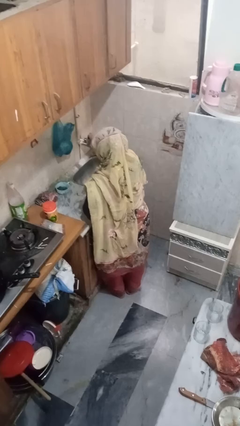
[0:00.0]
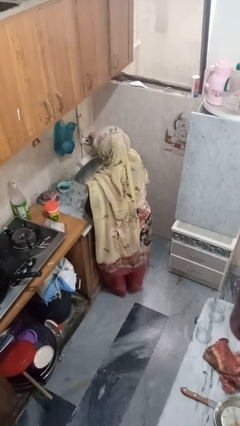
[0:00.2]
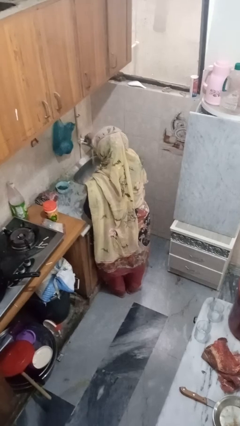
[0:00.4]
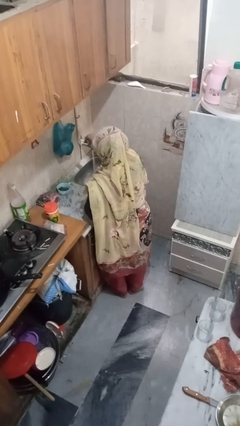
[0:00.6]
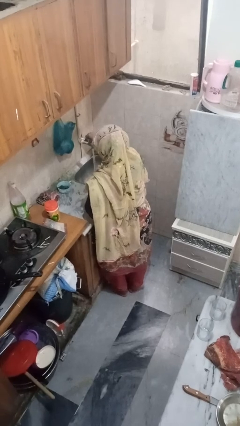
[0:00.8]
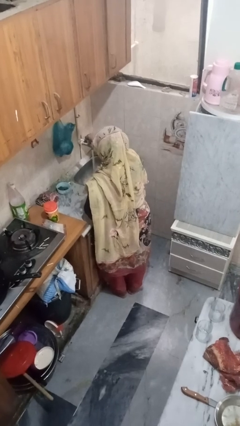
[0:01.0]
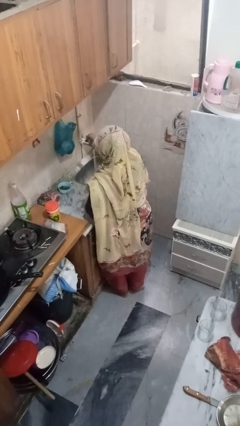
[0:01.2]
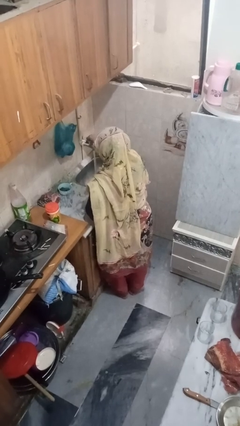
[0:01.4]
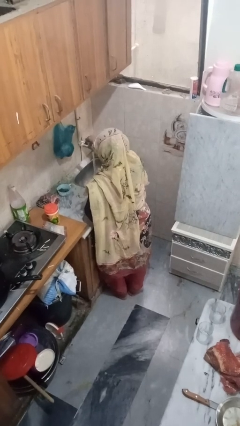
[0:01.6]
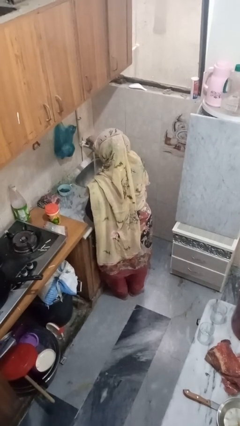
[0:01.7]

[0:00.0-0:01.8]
person turns on faucet

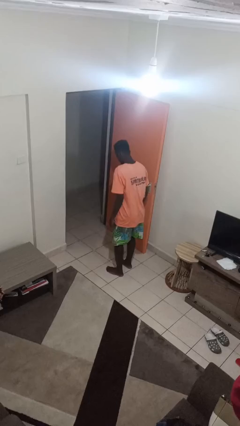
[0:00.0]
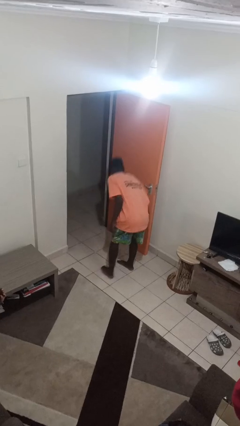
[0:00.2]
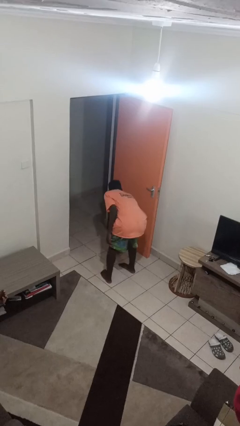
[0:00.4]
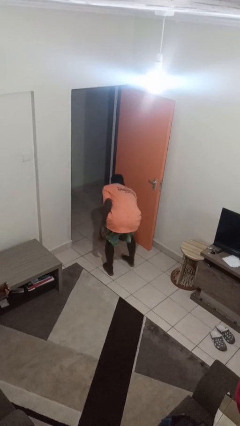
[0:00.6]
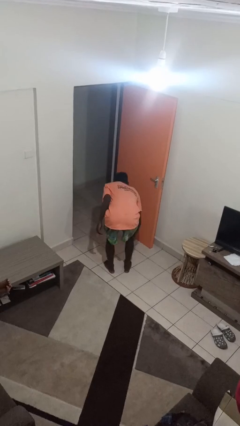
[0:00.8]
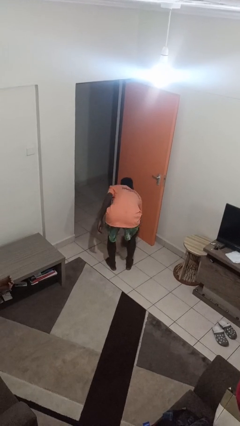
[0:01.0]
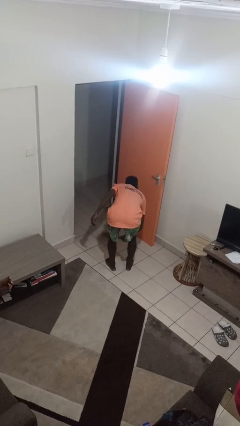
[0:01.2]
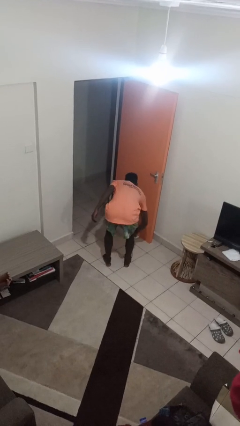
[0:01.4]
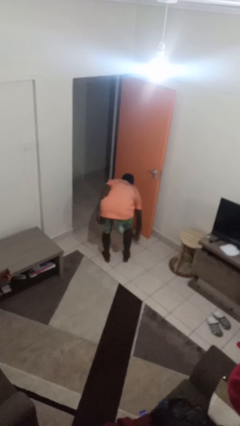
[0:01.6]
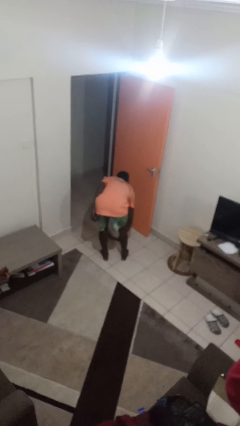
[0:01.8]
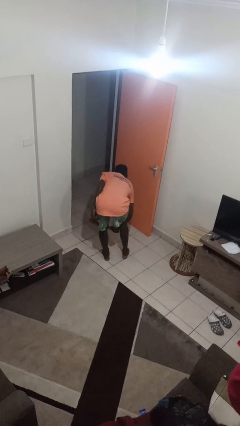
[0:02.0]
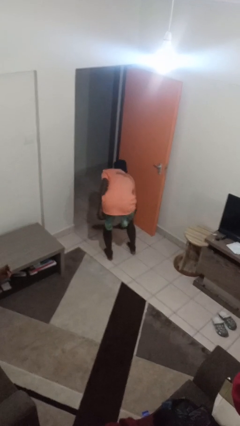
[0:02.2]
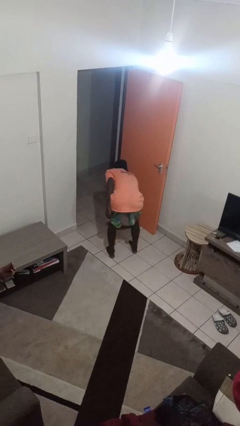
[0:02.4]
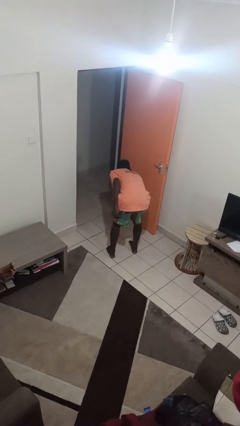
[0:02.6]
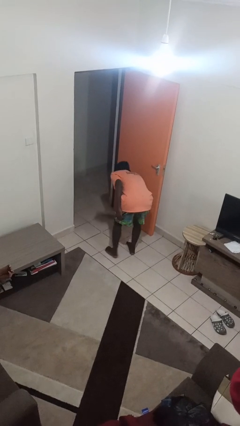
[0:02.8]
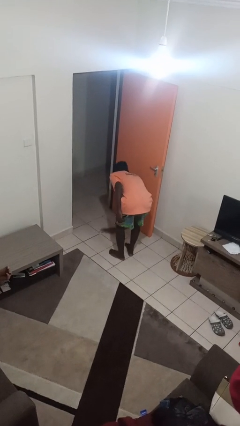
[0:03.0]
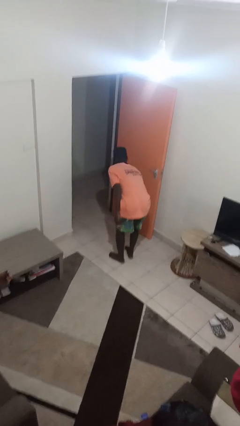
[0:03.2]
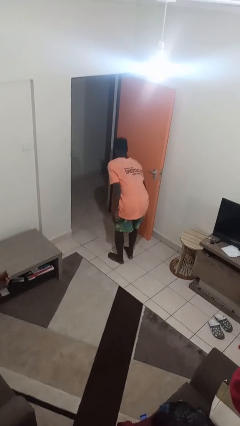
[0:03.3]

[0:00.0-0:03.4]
person sweeps floor

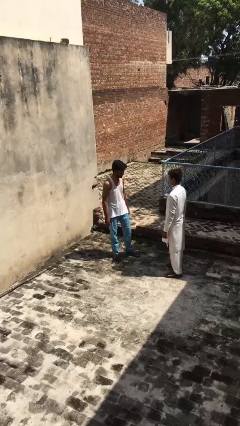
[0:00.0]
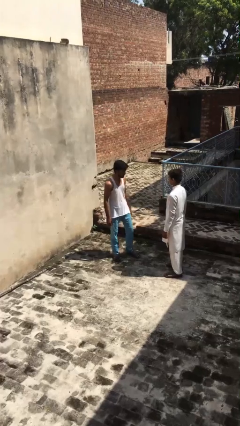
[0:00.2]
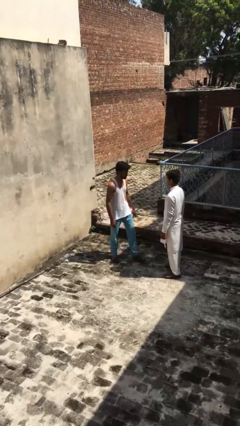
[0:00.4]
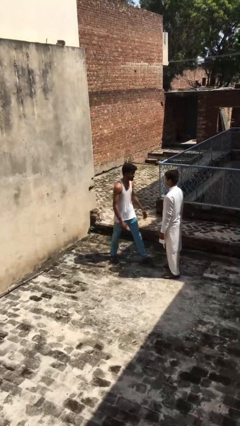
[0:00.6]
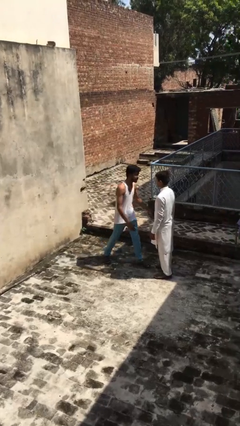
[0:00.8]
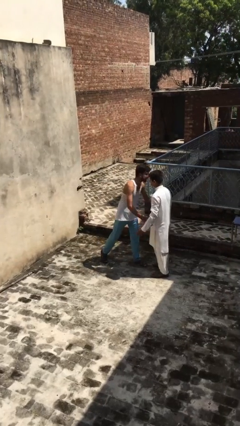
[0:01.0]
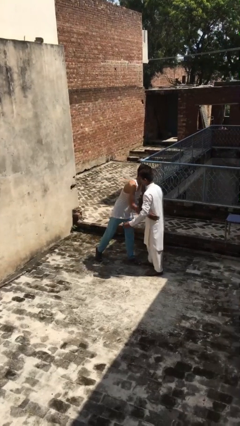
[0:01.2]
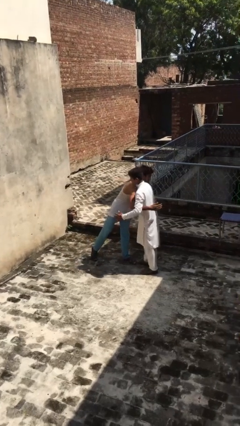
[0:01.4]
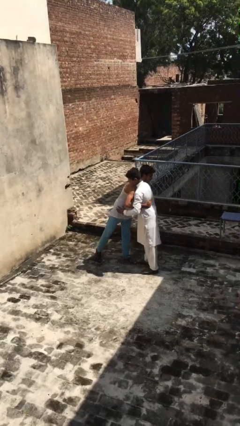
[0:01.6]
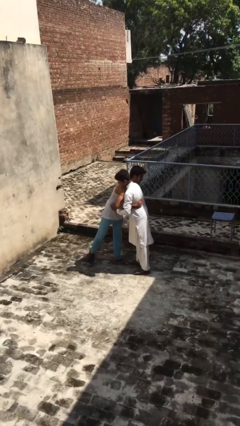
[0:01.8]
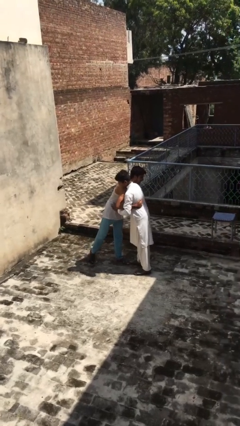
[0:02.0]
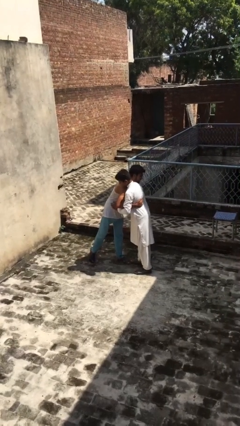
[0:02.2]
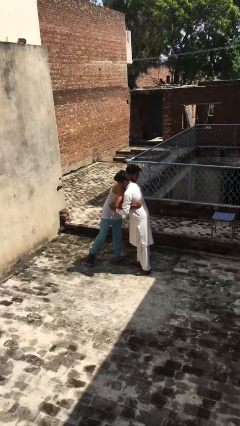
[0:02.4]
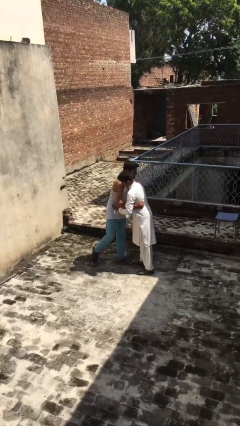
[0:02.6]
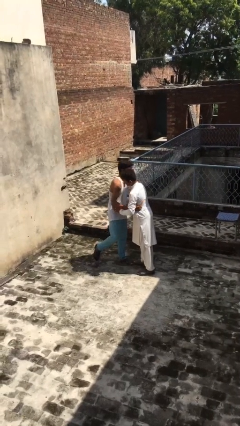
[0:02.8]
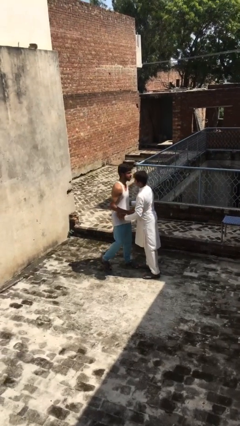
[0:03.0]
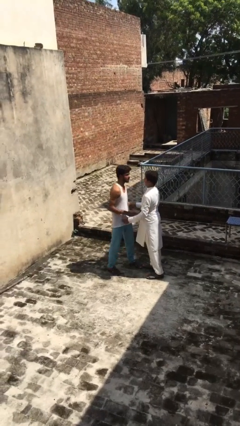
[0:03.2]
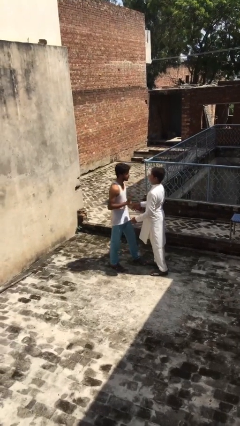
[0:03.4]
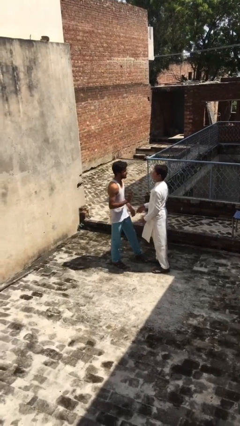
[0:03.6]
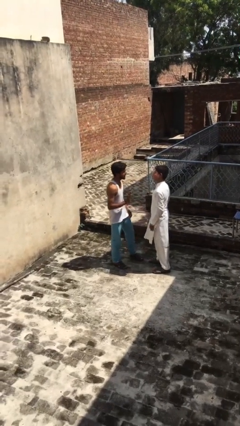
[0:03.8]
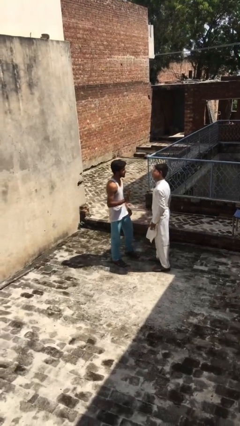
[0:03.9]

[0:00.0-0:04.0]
person embraces person

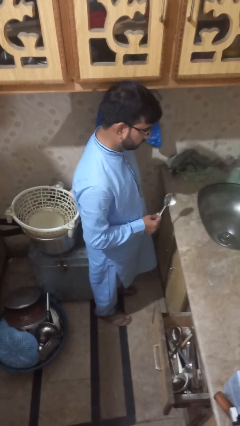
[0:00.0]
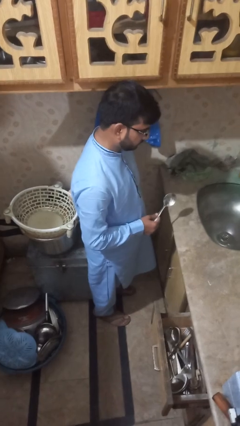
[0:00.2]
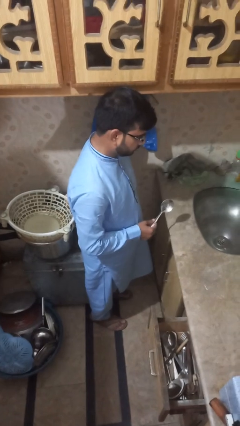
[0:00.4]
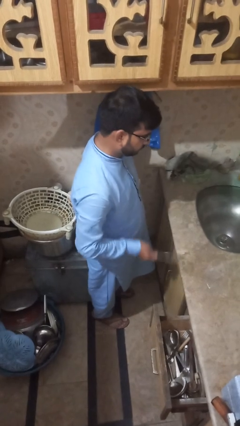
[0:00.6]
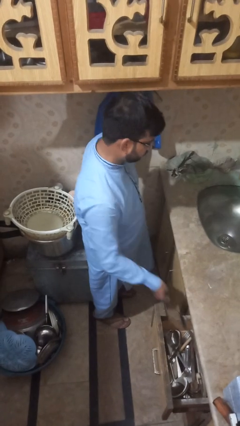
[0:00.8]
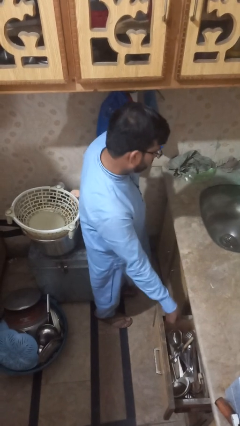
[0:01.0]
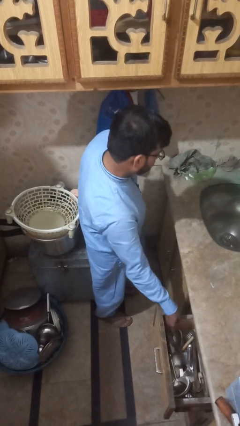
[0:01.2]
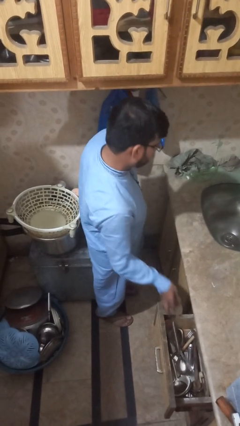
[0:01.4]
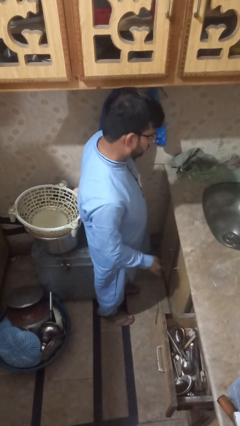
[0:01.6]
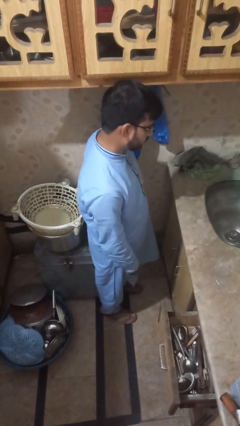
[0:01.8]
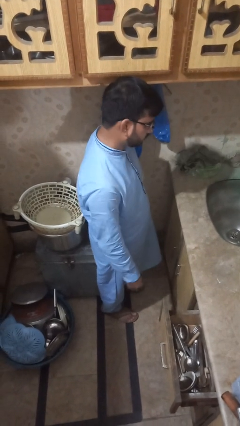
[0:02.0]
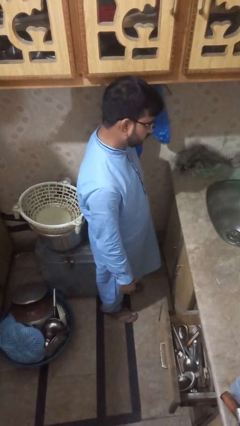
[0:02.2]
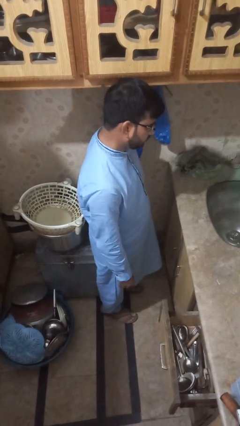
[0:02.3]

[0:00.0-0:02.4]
person puts object into kitchen drawer

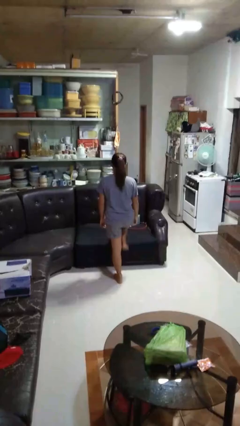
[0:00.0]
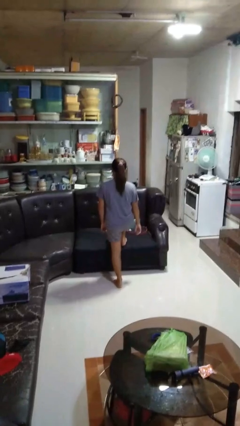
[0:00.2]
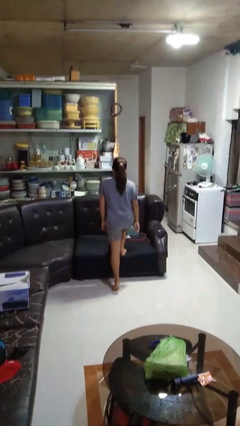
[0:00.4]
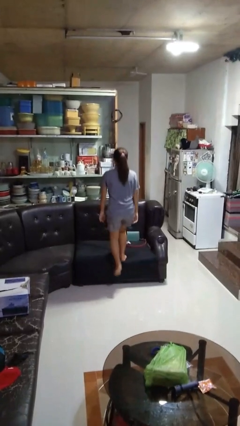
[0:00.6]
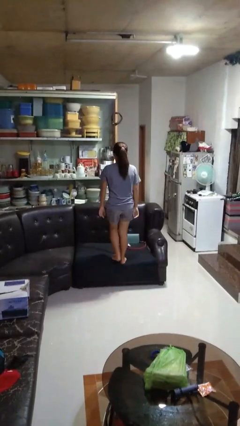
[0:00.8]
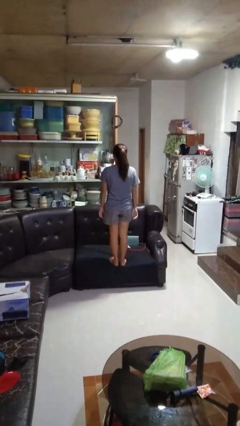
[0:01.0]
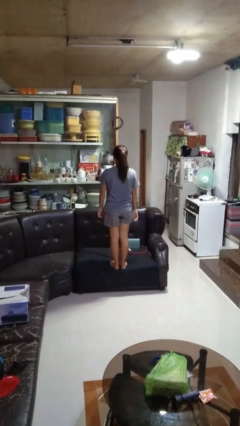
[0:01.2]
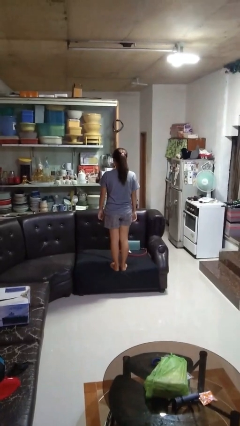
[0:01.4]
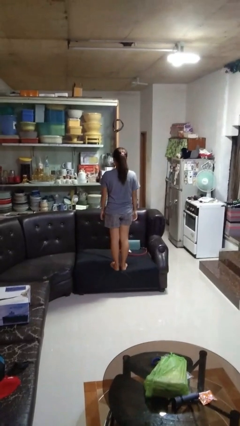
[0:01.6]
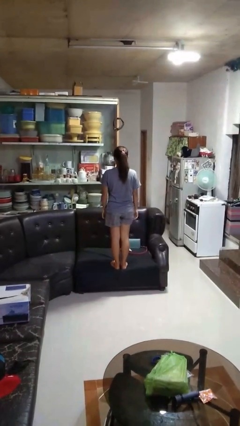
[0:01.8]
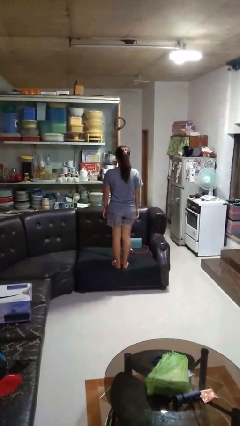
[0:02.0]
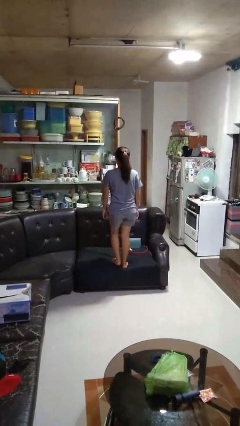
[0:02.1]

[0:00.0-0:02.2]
person climbs on couch

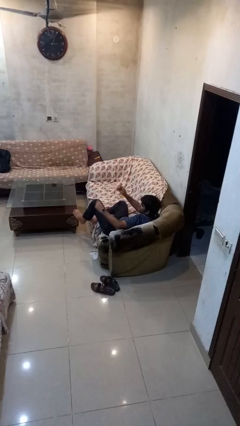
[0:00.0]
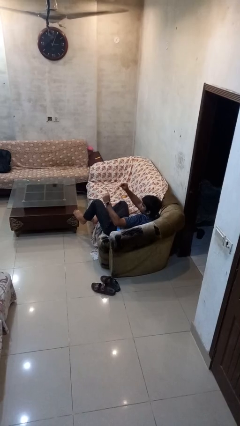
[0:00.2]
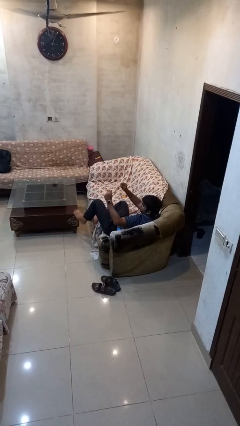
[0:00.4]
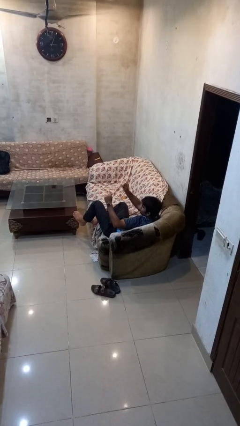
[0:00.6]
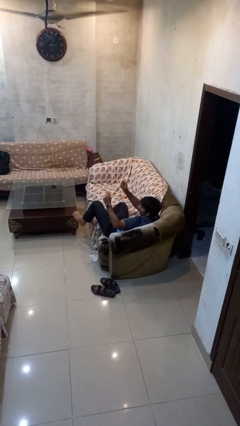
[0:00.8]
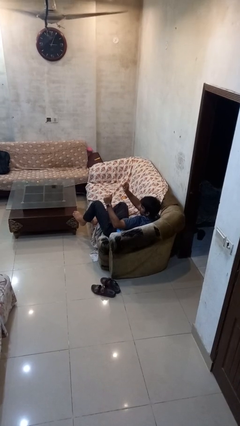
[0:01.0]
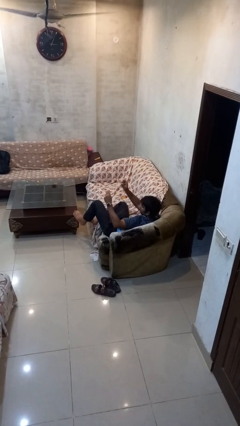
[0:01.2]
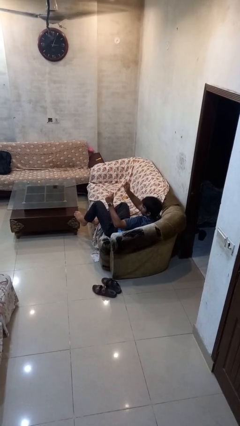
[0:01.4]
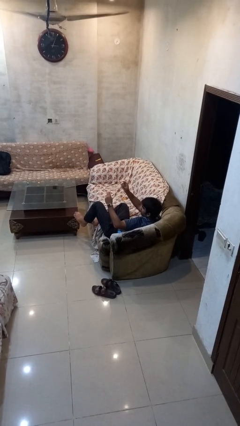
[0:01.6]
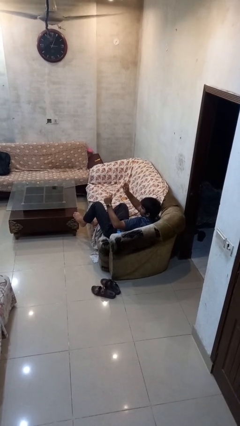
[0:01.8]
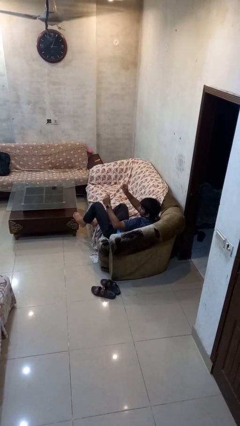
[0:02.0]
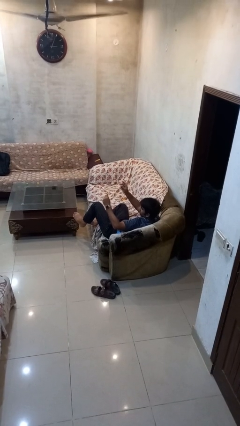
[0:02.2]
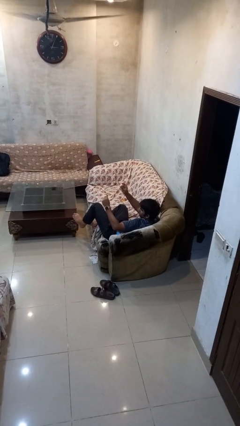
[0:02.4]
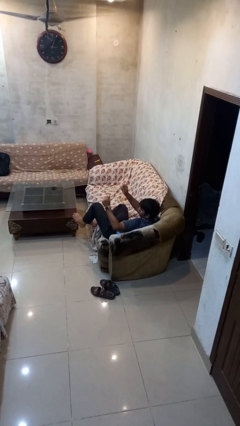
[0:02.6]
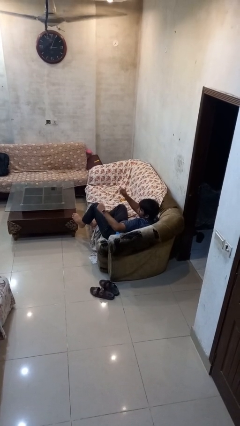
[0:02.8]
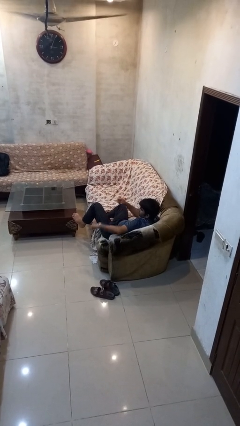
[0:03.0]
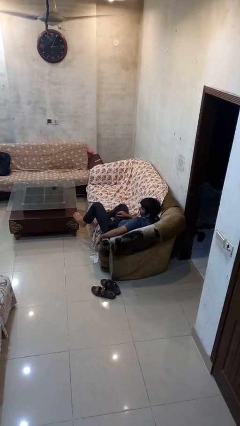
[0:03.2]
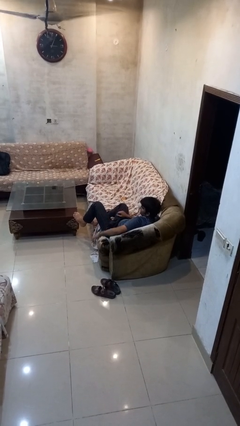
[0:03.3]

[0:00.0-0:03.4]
person snaps fingers

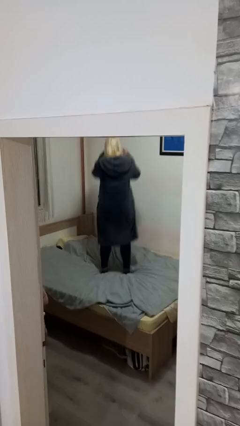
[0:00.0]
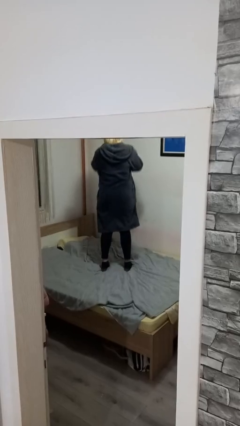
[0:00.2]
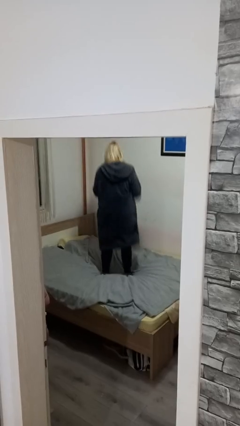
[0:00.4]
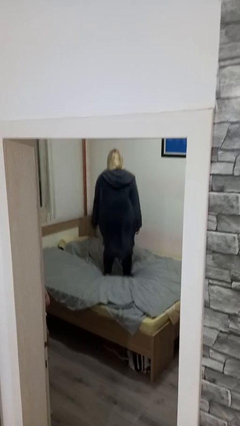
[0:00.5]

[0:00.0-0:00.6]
person jumps on bed
